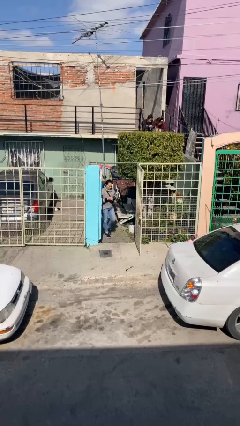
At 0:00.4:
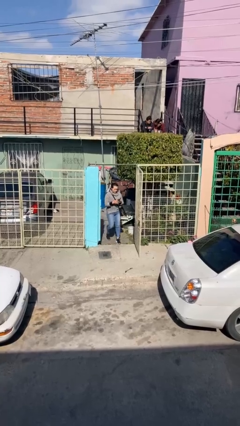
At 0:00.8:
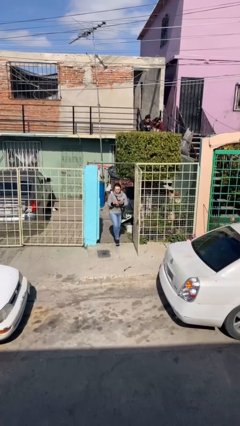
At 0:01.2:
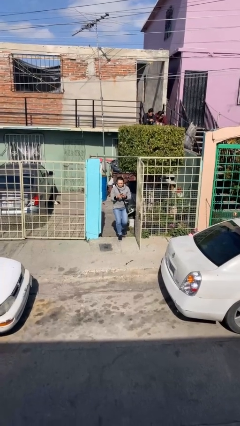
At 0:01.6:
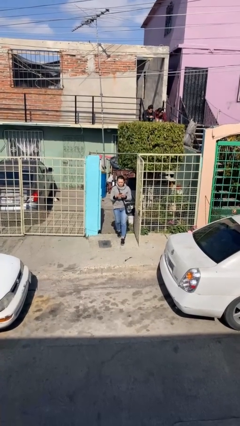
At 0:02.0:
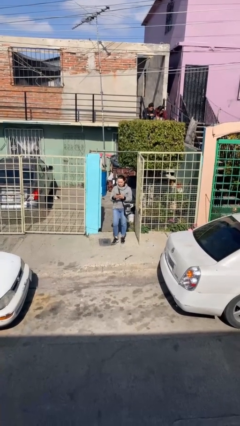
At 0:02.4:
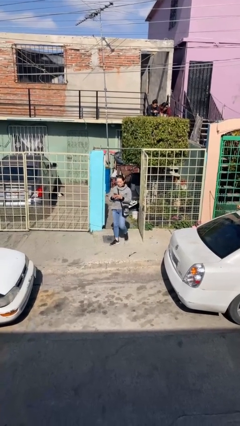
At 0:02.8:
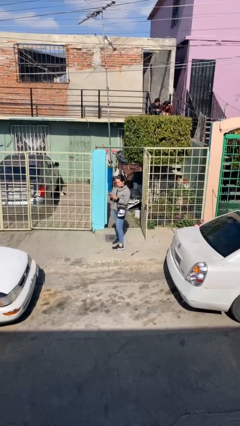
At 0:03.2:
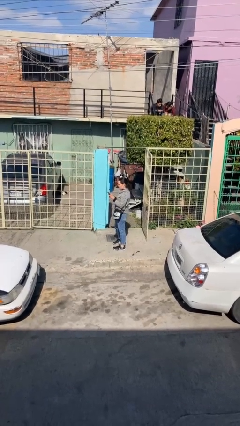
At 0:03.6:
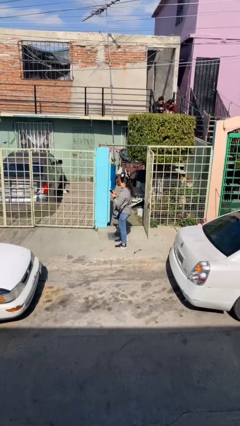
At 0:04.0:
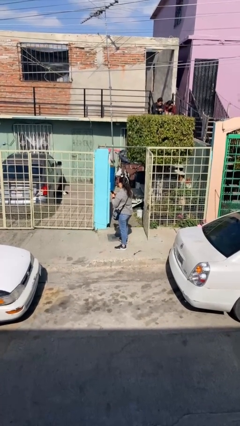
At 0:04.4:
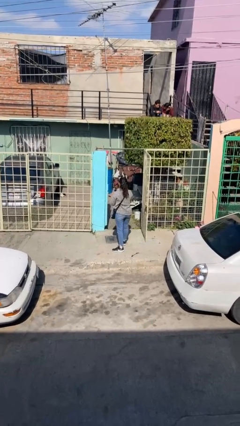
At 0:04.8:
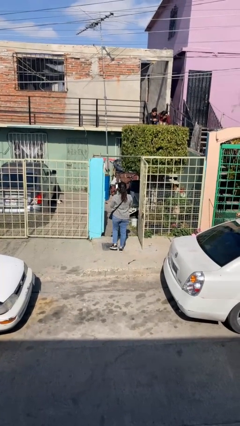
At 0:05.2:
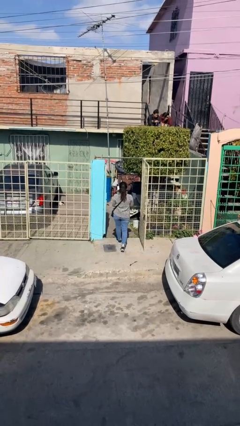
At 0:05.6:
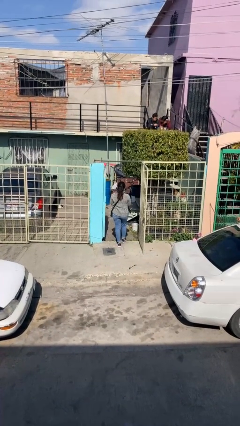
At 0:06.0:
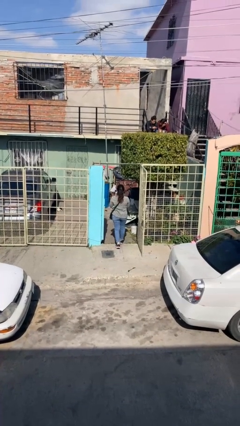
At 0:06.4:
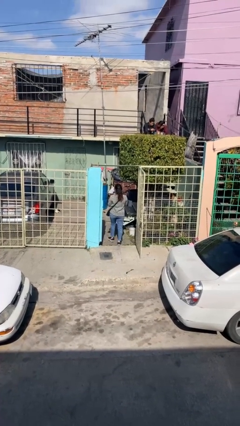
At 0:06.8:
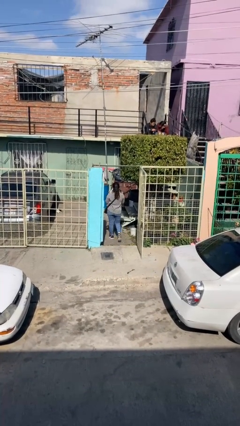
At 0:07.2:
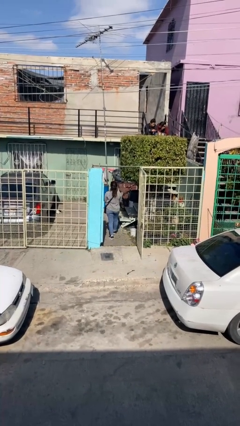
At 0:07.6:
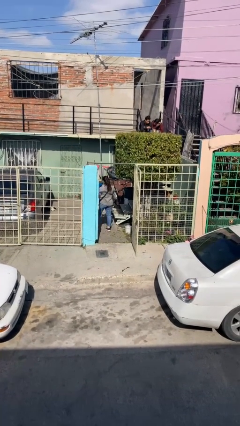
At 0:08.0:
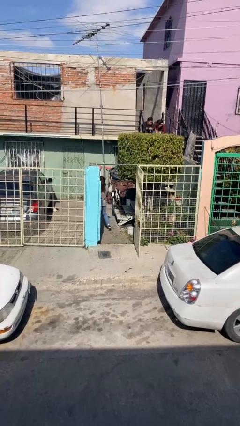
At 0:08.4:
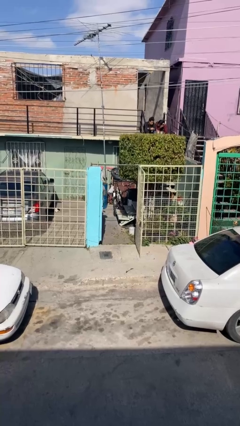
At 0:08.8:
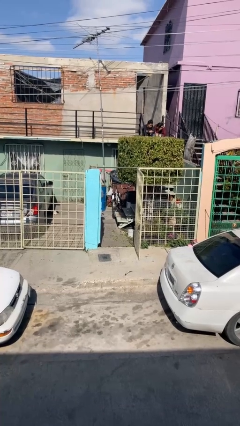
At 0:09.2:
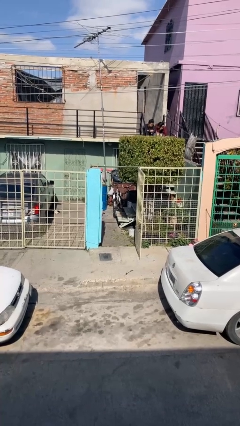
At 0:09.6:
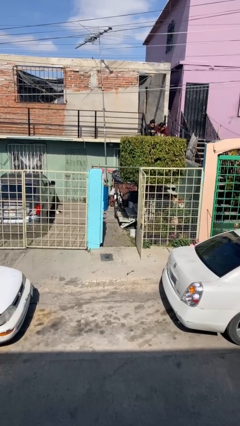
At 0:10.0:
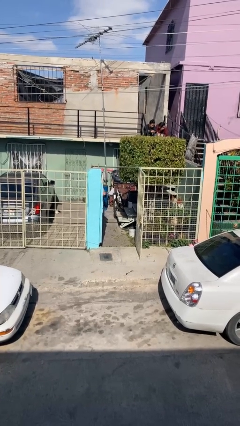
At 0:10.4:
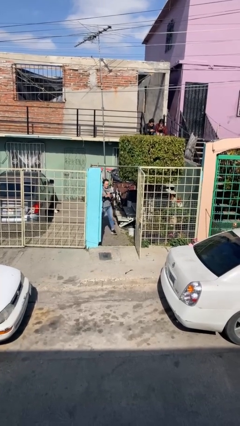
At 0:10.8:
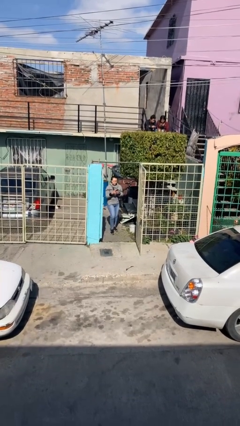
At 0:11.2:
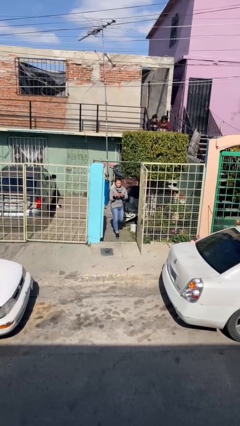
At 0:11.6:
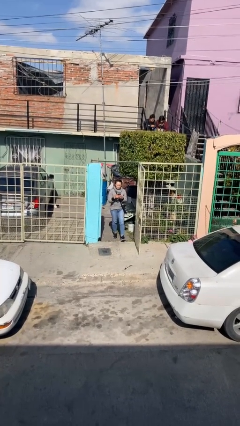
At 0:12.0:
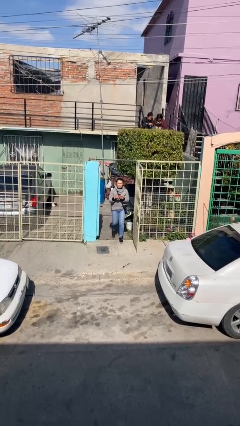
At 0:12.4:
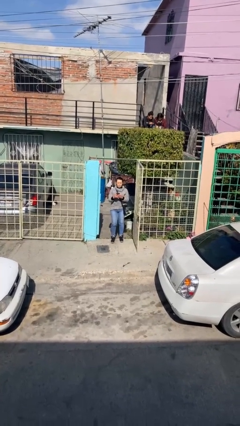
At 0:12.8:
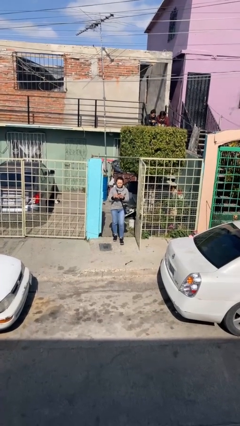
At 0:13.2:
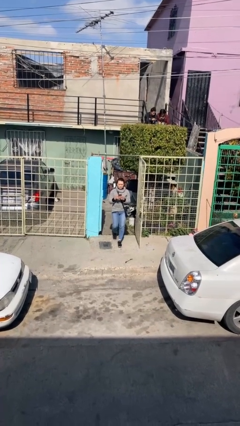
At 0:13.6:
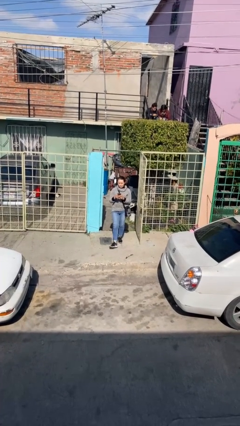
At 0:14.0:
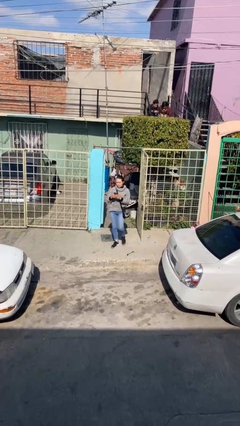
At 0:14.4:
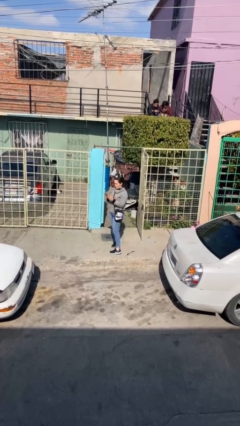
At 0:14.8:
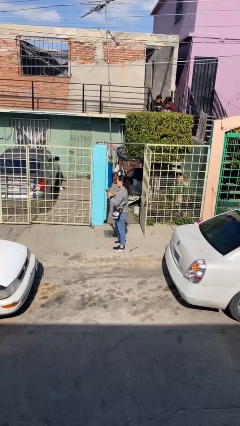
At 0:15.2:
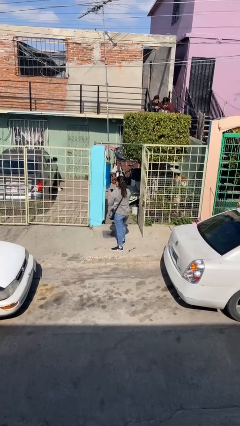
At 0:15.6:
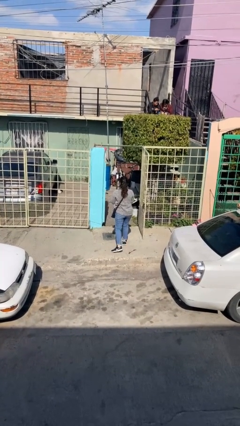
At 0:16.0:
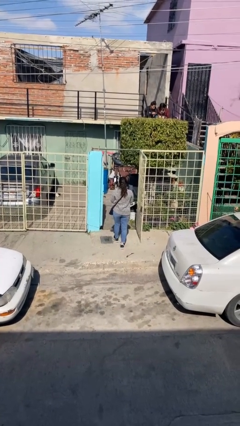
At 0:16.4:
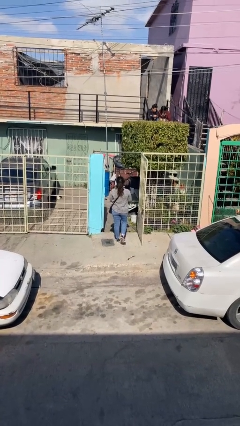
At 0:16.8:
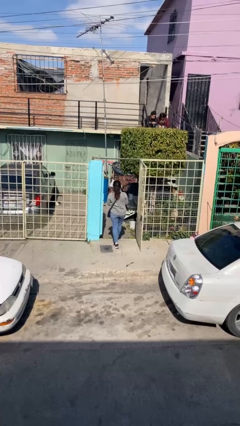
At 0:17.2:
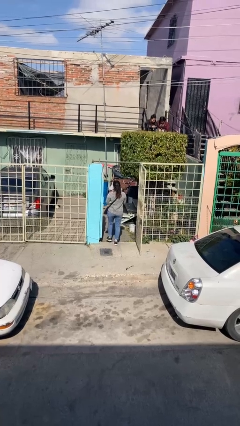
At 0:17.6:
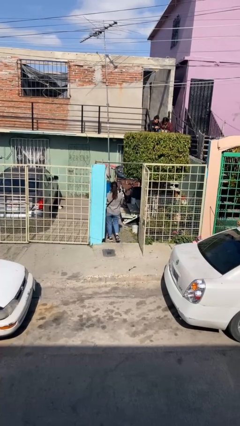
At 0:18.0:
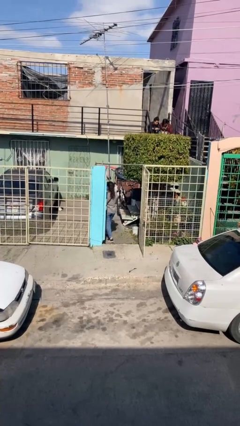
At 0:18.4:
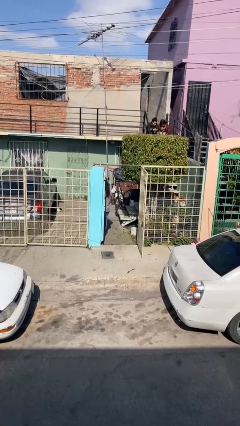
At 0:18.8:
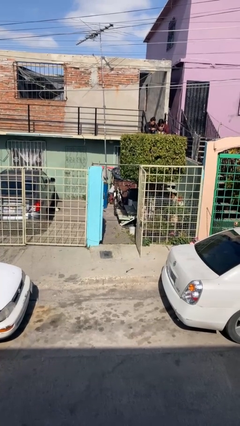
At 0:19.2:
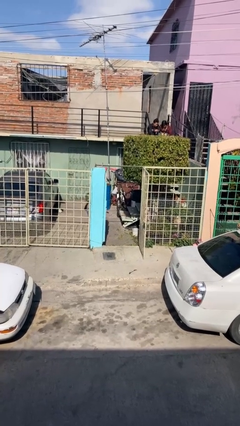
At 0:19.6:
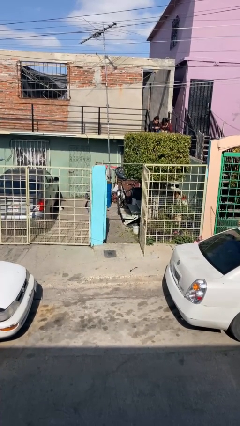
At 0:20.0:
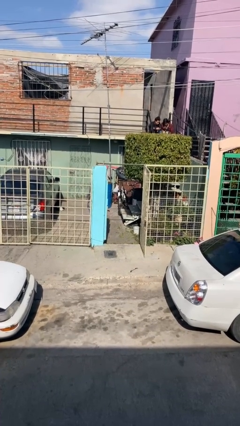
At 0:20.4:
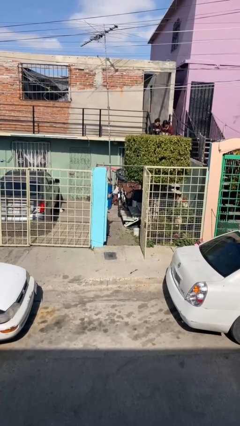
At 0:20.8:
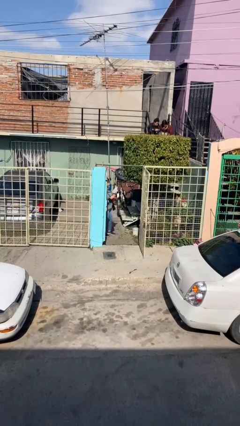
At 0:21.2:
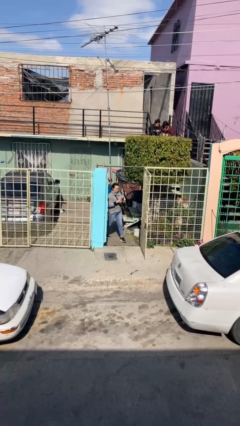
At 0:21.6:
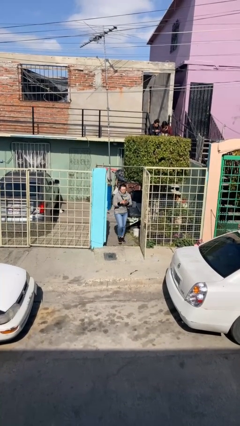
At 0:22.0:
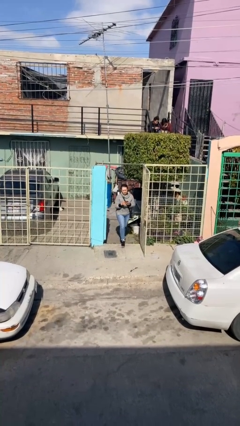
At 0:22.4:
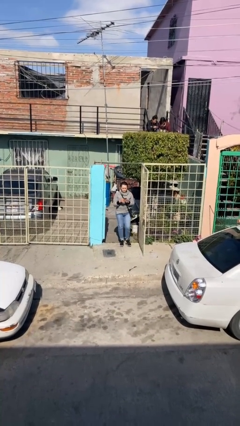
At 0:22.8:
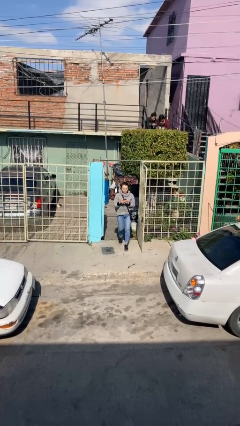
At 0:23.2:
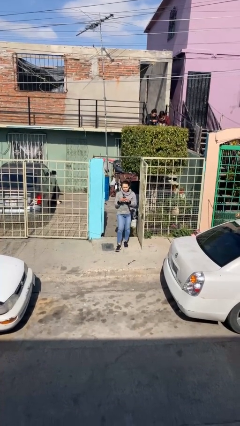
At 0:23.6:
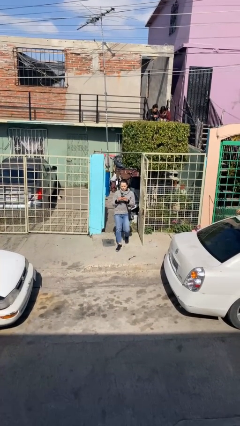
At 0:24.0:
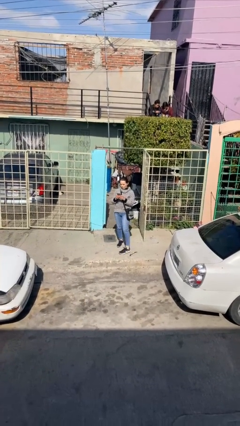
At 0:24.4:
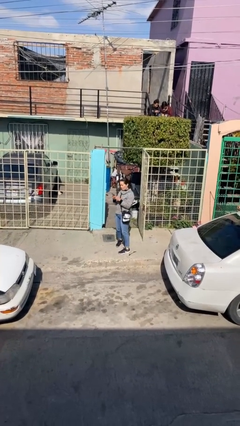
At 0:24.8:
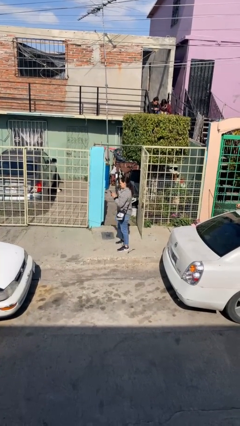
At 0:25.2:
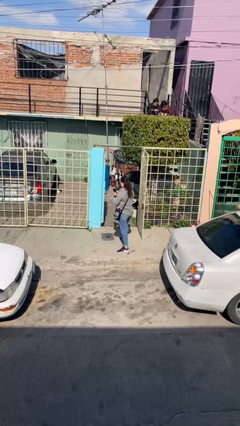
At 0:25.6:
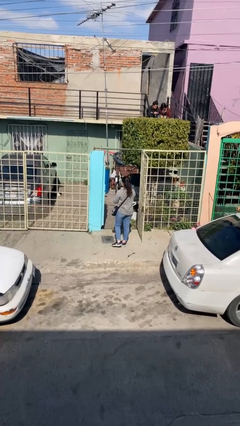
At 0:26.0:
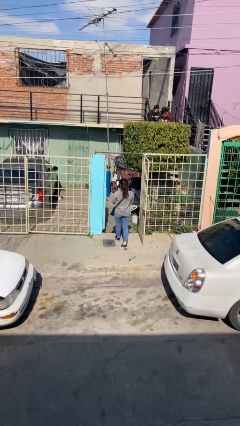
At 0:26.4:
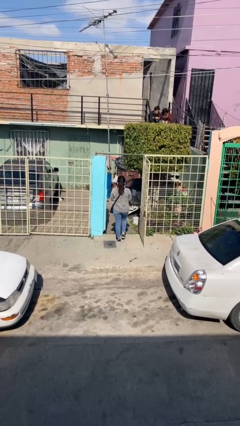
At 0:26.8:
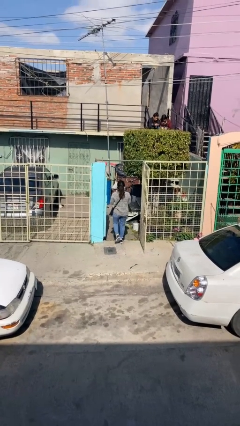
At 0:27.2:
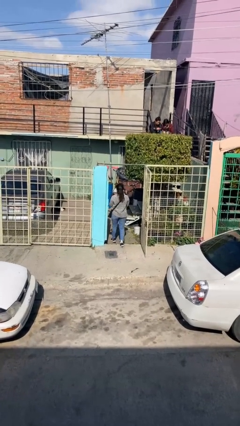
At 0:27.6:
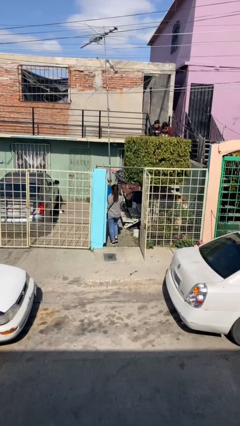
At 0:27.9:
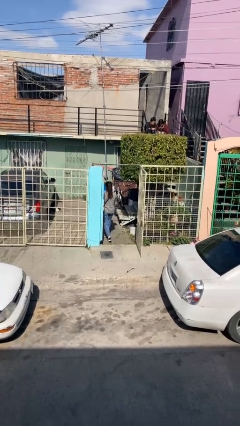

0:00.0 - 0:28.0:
person texts on phone

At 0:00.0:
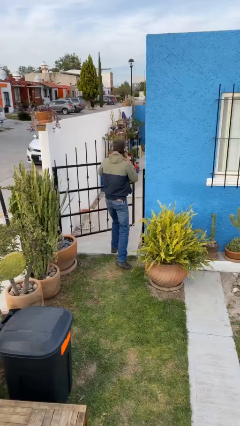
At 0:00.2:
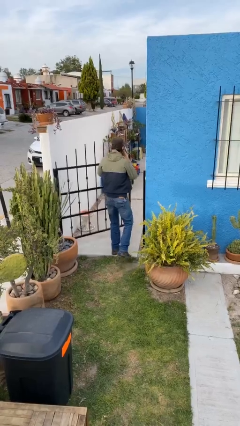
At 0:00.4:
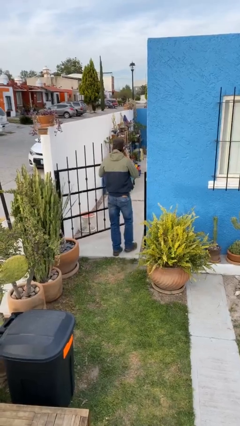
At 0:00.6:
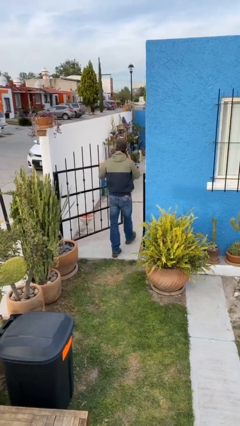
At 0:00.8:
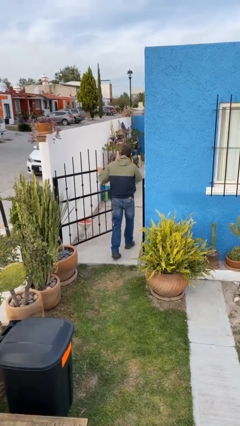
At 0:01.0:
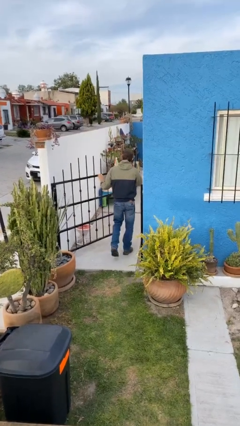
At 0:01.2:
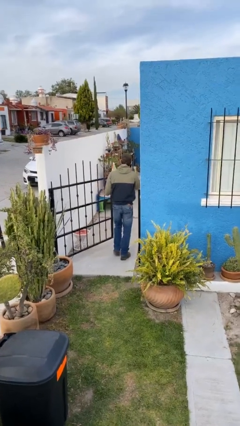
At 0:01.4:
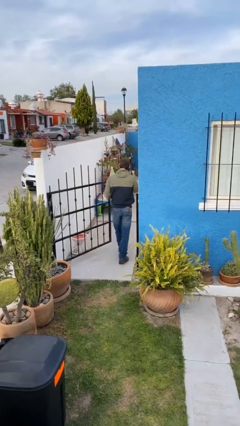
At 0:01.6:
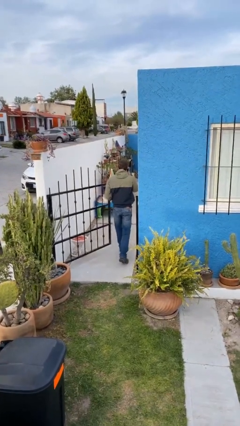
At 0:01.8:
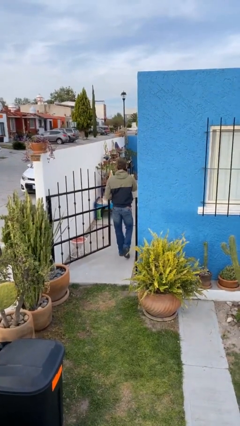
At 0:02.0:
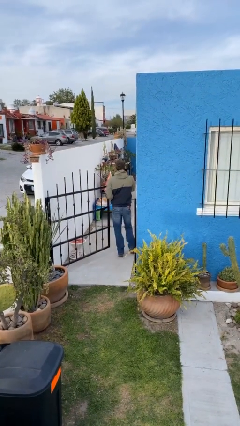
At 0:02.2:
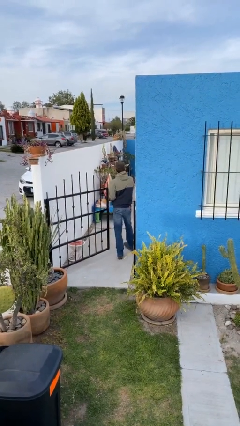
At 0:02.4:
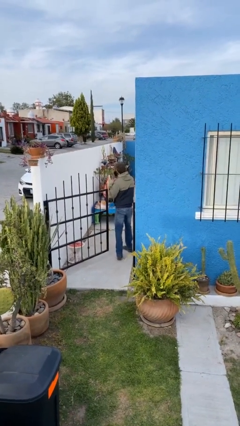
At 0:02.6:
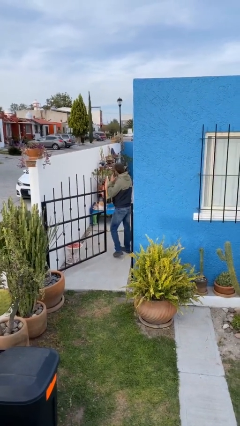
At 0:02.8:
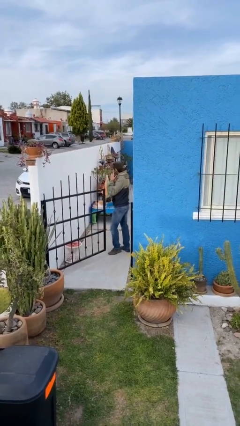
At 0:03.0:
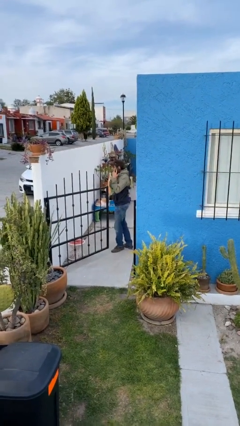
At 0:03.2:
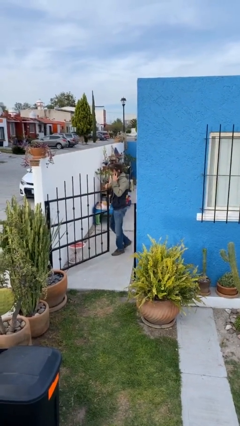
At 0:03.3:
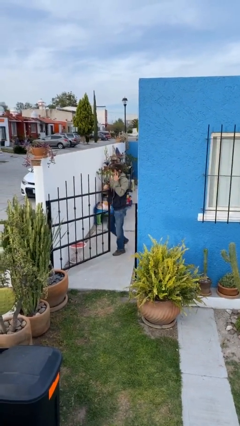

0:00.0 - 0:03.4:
person exits scene through structure

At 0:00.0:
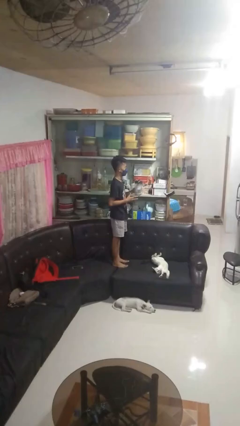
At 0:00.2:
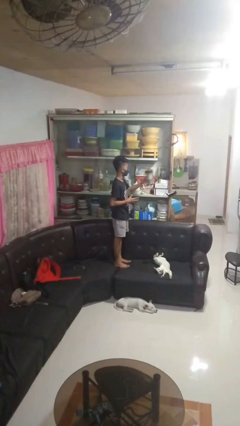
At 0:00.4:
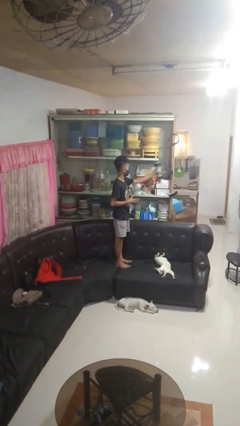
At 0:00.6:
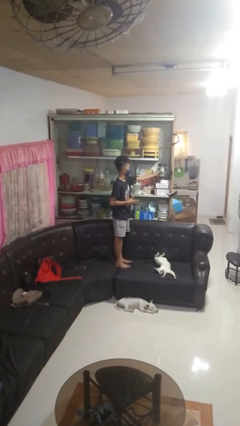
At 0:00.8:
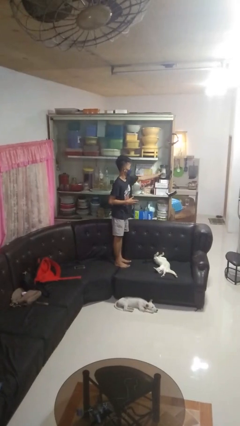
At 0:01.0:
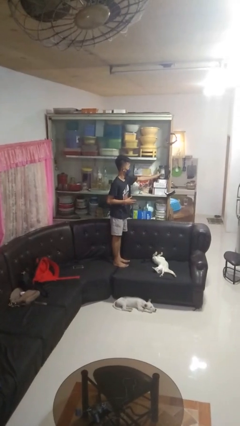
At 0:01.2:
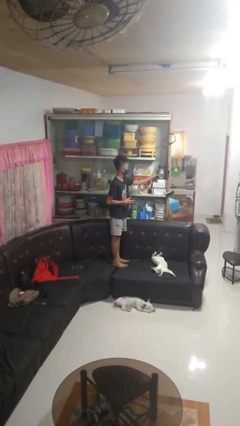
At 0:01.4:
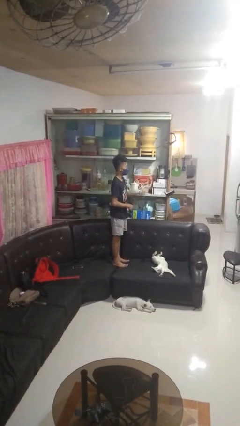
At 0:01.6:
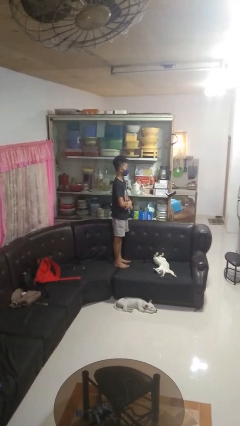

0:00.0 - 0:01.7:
person puts down object into cabinet
